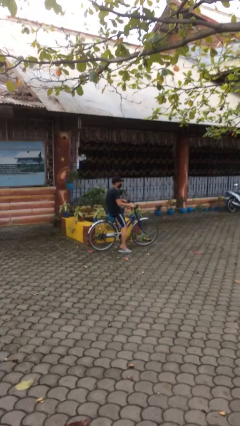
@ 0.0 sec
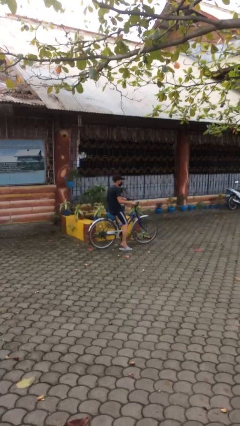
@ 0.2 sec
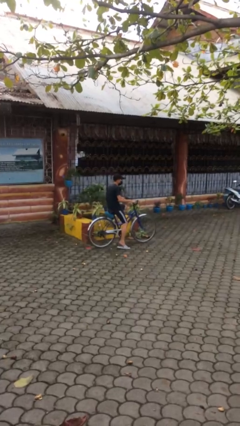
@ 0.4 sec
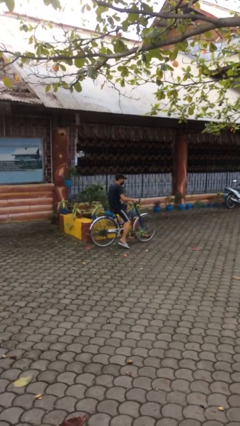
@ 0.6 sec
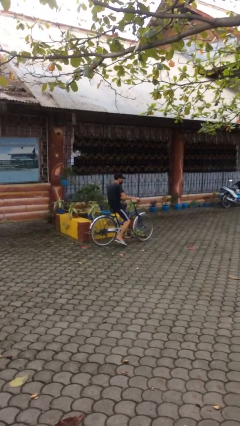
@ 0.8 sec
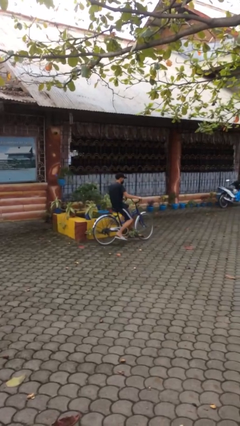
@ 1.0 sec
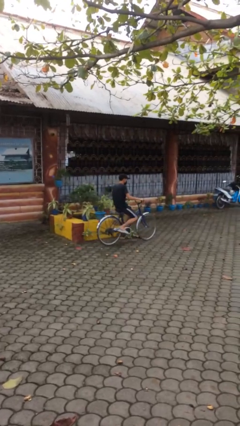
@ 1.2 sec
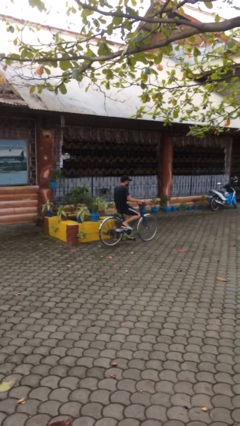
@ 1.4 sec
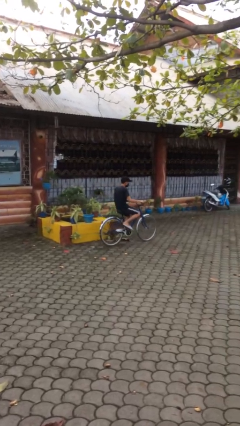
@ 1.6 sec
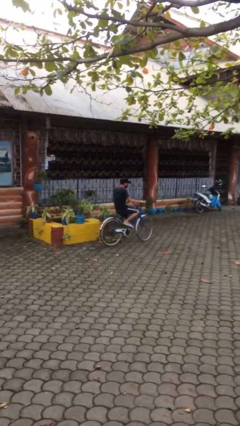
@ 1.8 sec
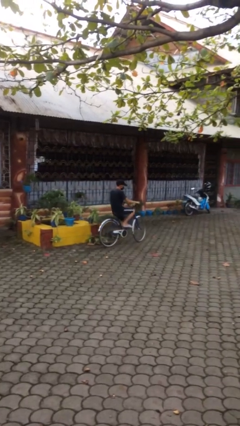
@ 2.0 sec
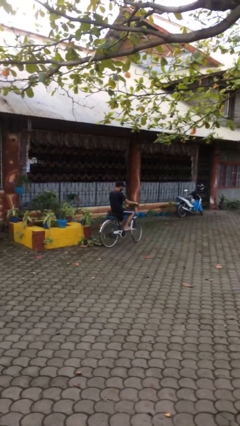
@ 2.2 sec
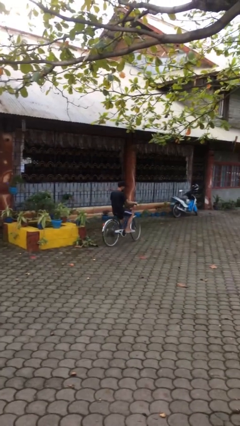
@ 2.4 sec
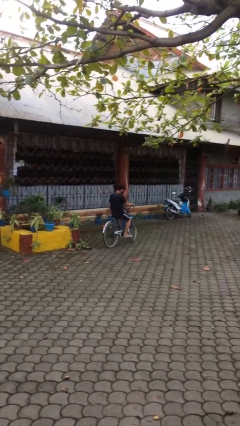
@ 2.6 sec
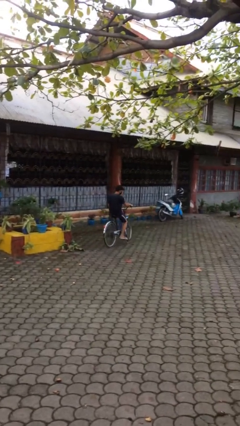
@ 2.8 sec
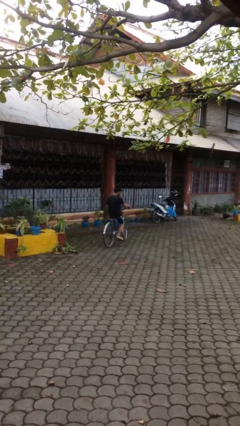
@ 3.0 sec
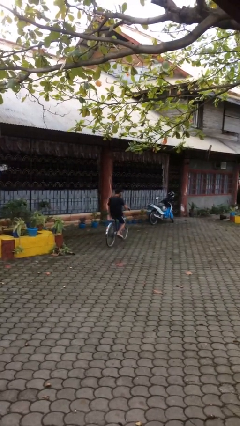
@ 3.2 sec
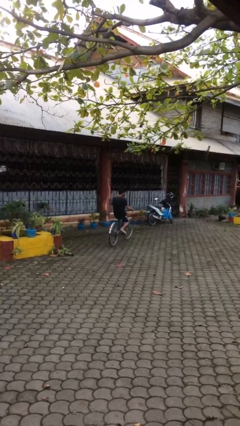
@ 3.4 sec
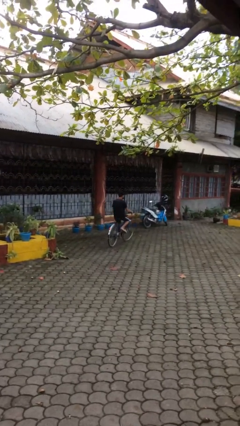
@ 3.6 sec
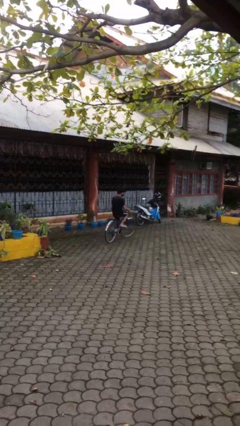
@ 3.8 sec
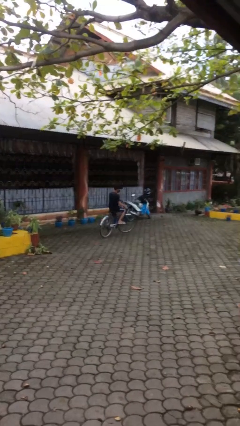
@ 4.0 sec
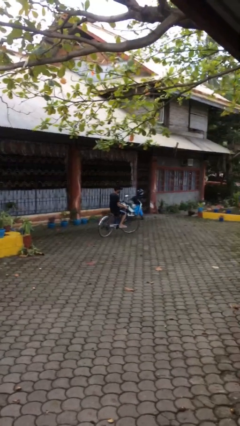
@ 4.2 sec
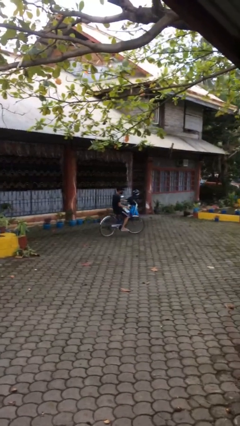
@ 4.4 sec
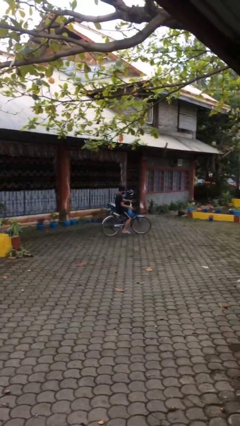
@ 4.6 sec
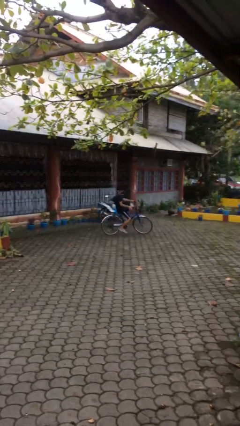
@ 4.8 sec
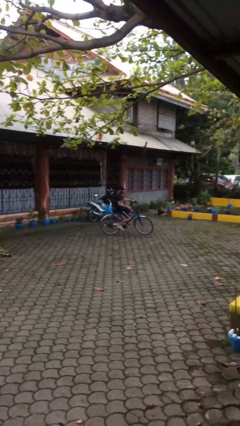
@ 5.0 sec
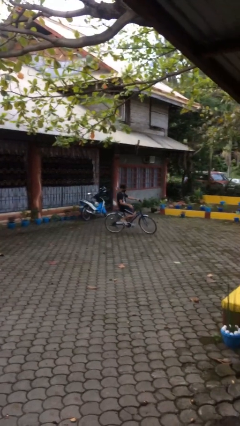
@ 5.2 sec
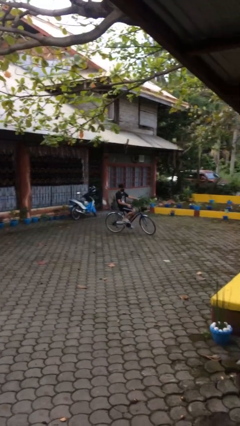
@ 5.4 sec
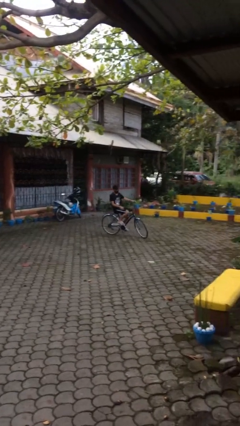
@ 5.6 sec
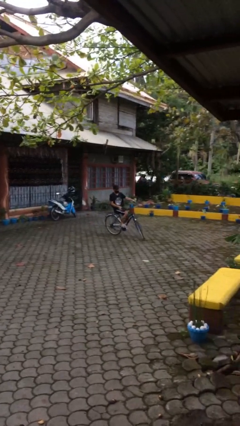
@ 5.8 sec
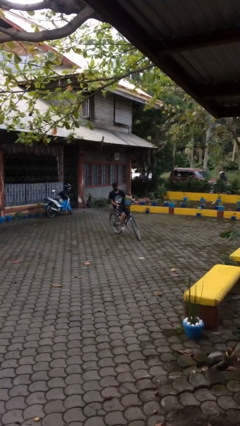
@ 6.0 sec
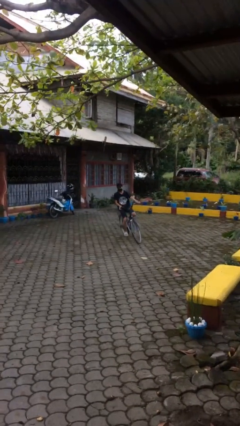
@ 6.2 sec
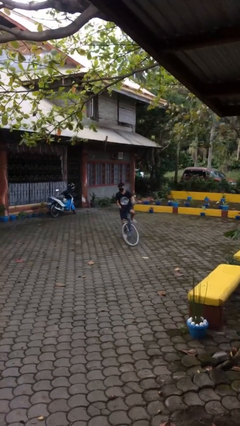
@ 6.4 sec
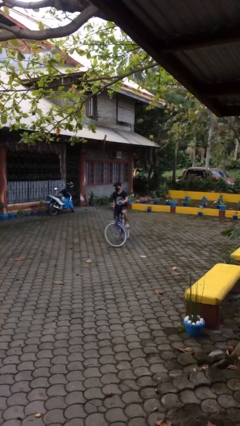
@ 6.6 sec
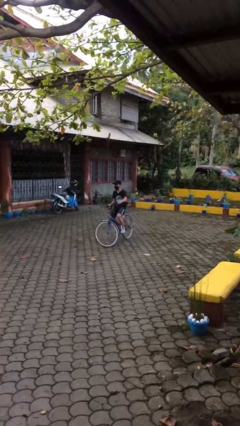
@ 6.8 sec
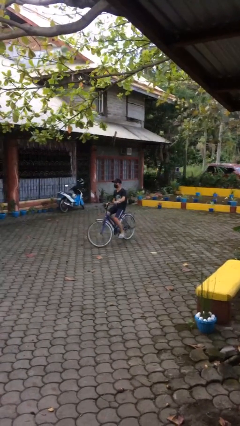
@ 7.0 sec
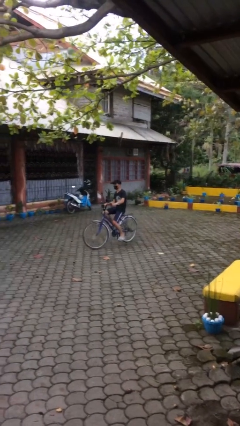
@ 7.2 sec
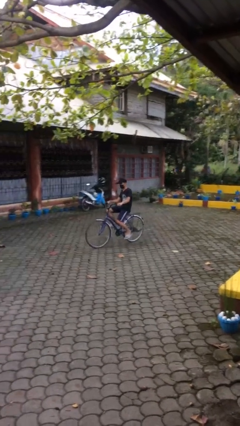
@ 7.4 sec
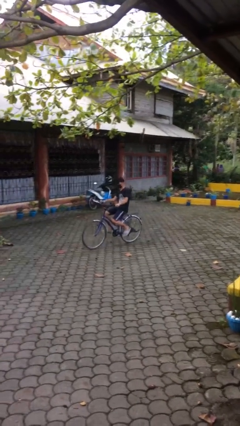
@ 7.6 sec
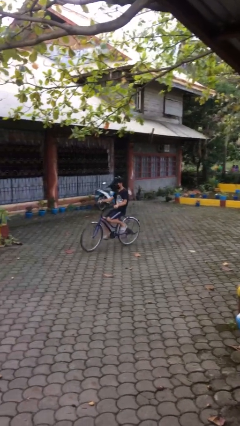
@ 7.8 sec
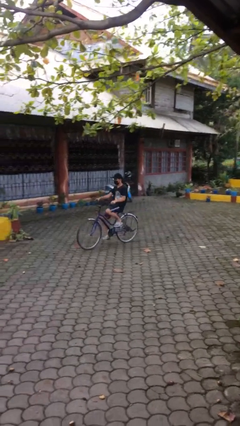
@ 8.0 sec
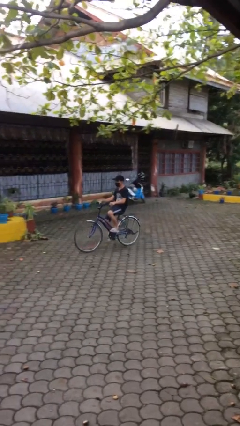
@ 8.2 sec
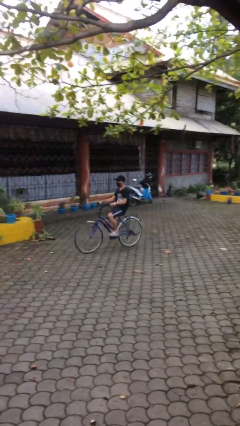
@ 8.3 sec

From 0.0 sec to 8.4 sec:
person rides bicycle

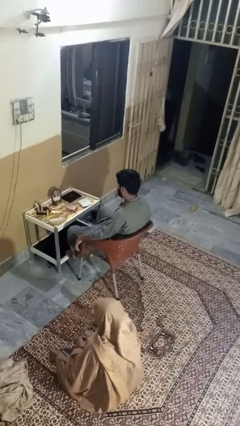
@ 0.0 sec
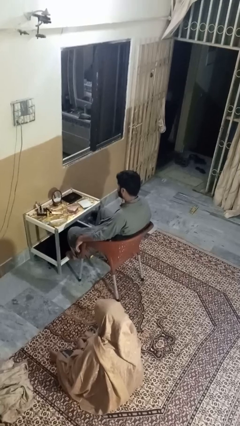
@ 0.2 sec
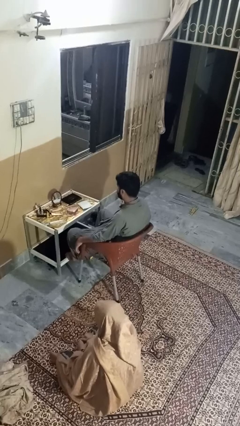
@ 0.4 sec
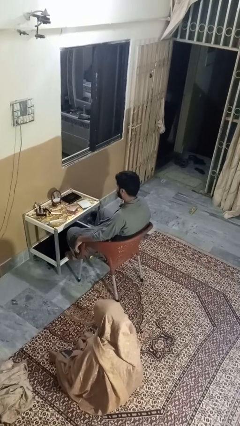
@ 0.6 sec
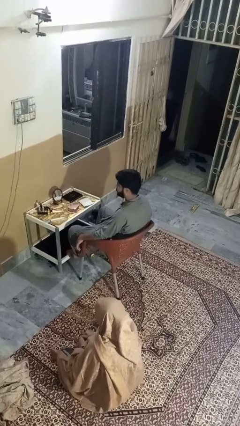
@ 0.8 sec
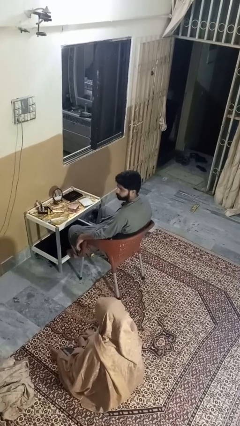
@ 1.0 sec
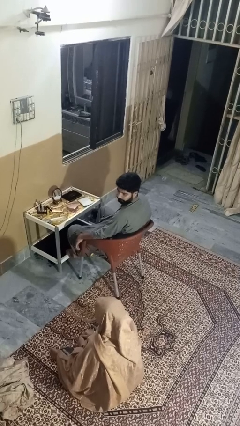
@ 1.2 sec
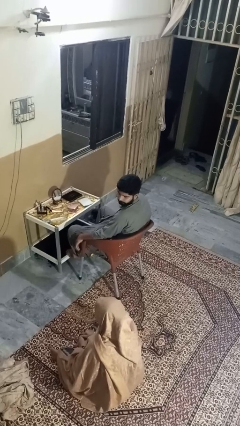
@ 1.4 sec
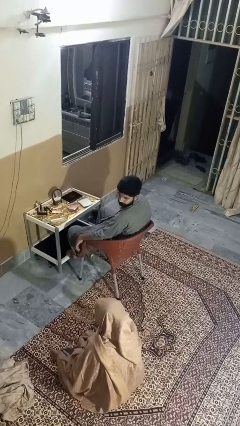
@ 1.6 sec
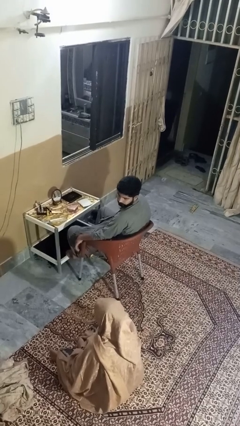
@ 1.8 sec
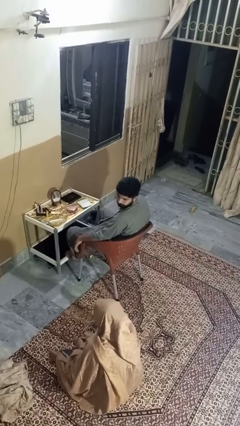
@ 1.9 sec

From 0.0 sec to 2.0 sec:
person looks over shoulder

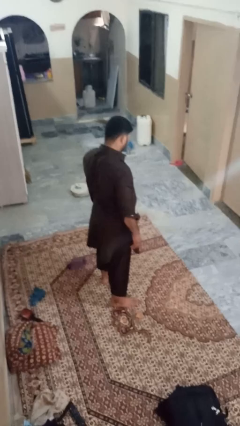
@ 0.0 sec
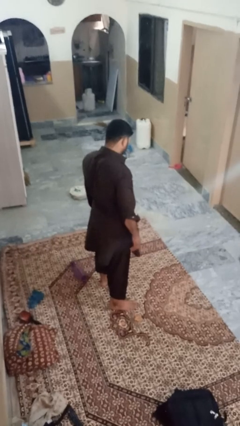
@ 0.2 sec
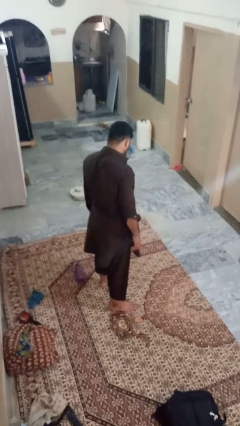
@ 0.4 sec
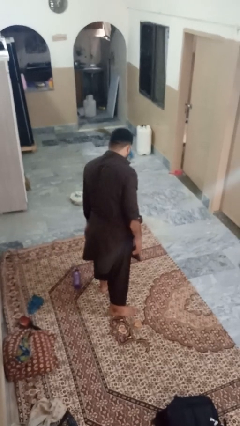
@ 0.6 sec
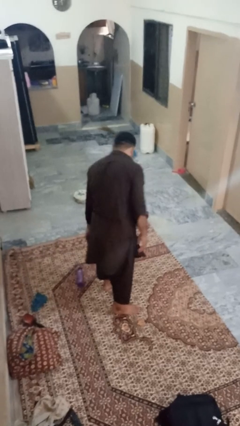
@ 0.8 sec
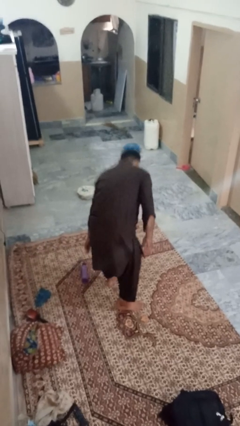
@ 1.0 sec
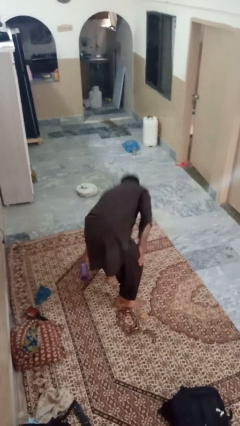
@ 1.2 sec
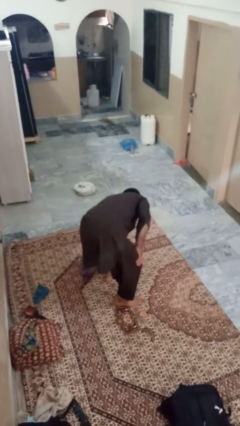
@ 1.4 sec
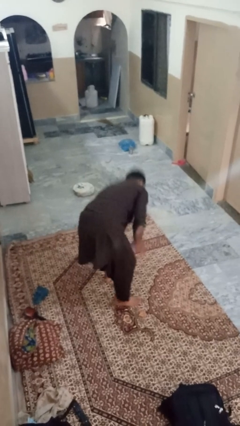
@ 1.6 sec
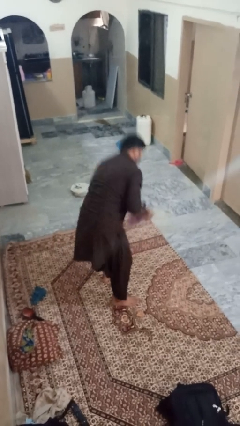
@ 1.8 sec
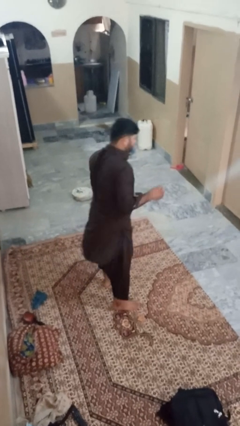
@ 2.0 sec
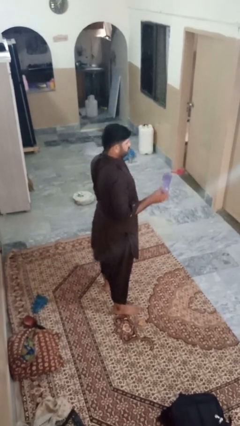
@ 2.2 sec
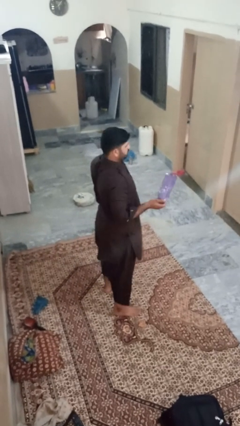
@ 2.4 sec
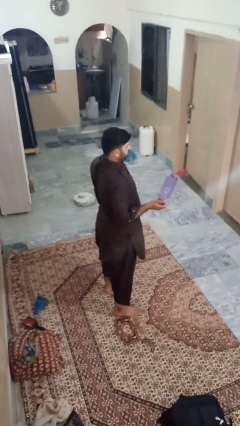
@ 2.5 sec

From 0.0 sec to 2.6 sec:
person picks up object from floor

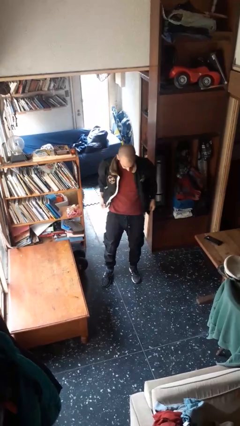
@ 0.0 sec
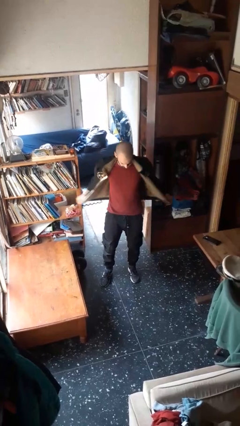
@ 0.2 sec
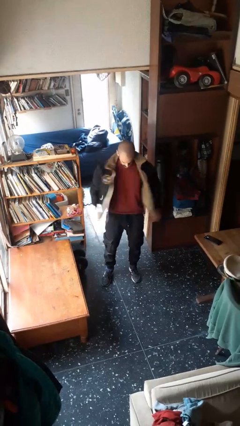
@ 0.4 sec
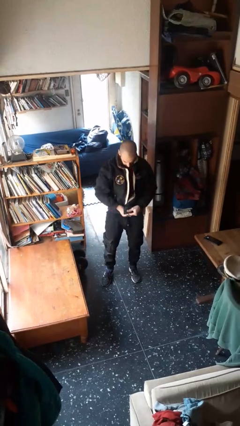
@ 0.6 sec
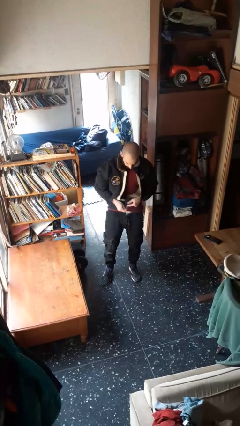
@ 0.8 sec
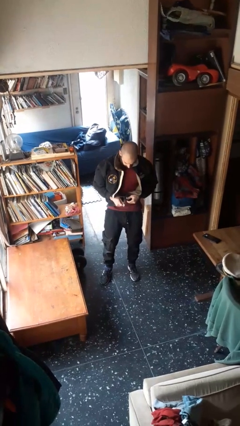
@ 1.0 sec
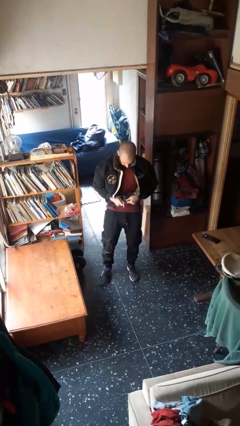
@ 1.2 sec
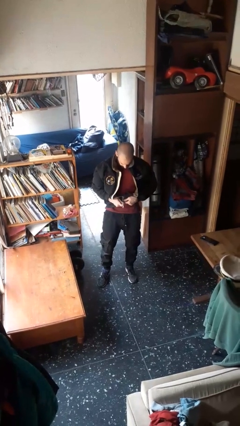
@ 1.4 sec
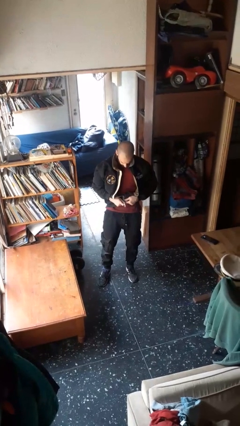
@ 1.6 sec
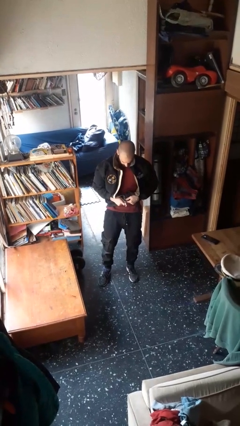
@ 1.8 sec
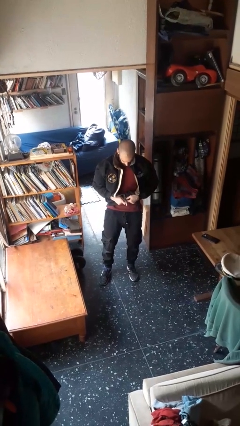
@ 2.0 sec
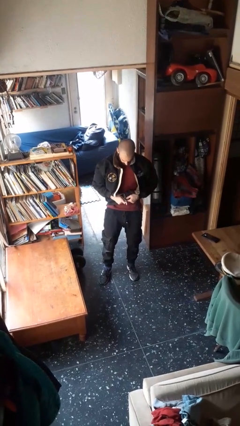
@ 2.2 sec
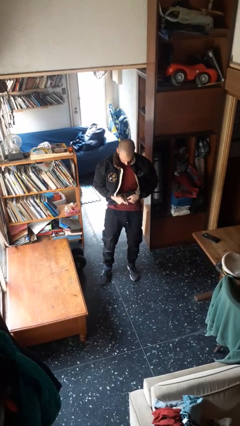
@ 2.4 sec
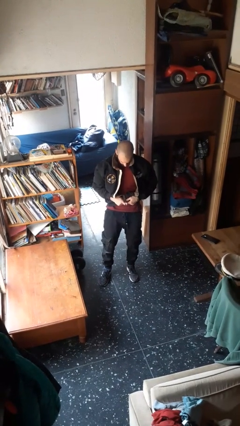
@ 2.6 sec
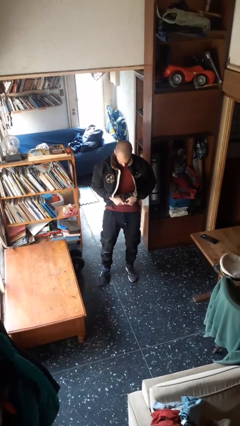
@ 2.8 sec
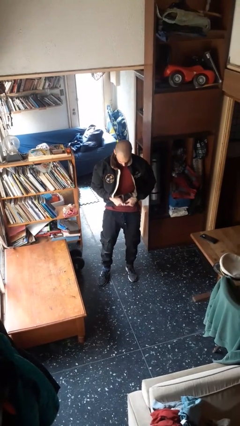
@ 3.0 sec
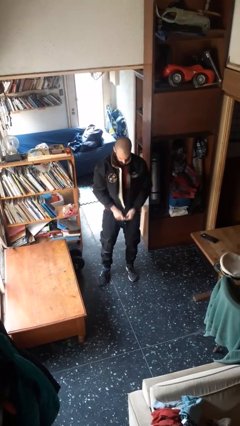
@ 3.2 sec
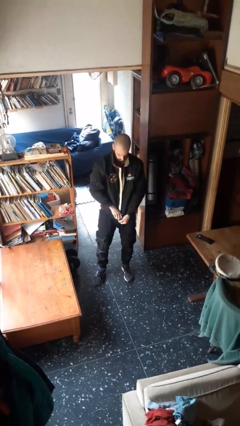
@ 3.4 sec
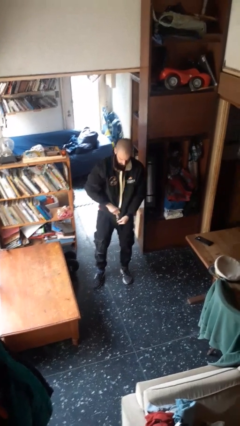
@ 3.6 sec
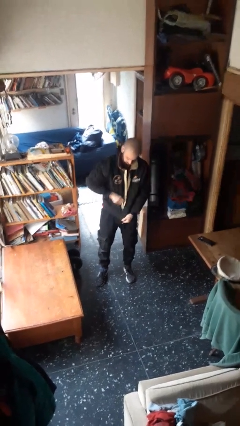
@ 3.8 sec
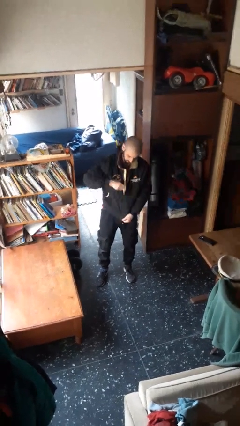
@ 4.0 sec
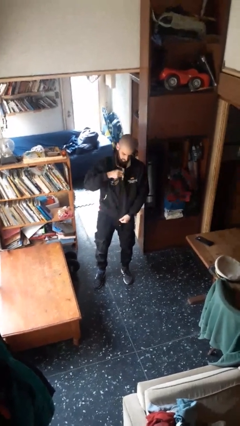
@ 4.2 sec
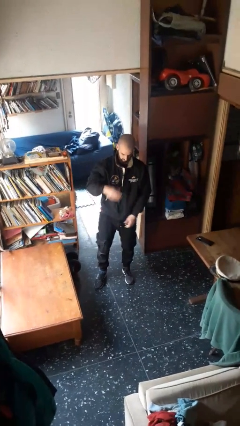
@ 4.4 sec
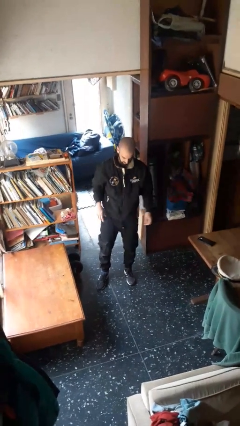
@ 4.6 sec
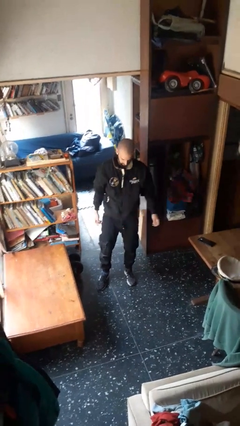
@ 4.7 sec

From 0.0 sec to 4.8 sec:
person zips up jacket
